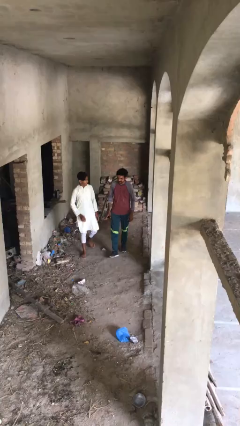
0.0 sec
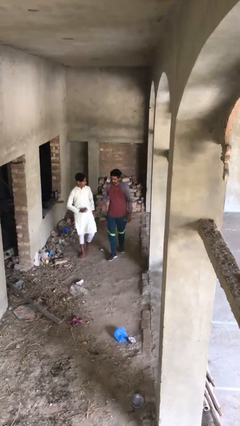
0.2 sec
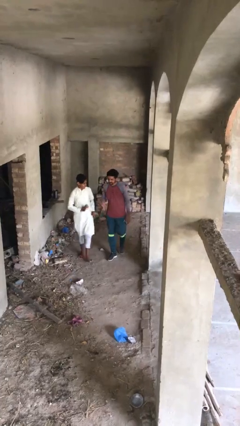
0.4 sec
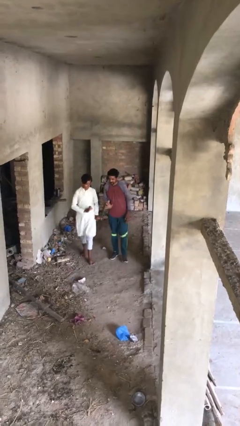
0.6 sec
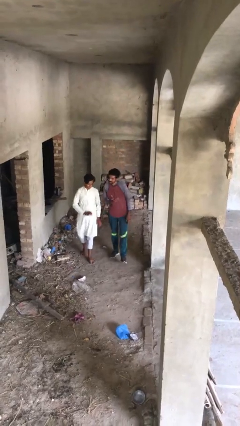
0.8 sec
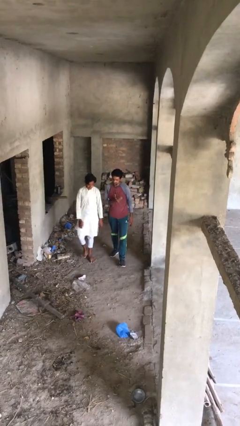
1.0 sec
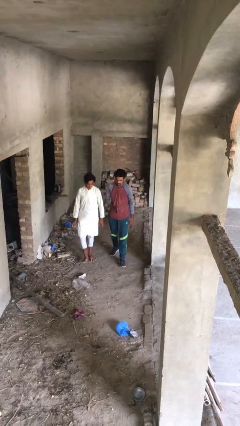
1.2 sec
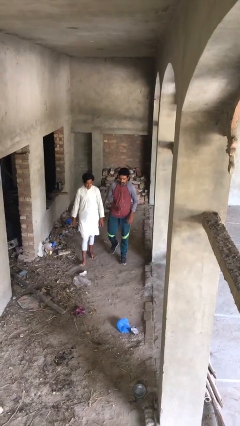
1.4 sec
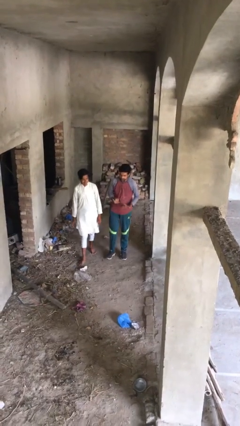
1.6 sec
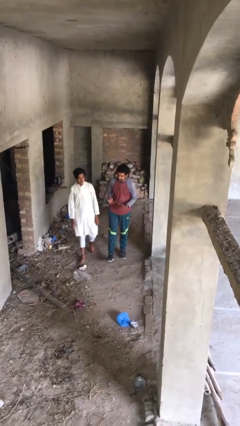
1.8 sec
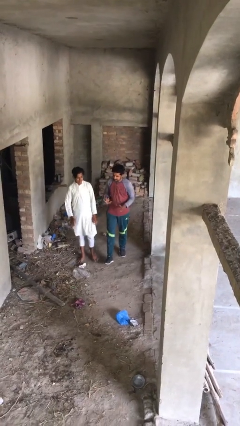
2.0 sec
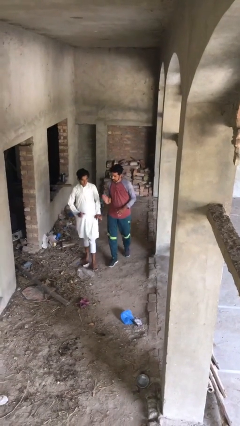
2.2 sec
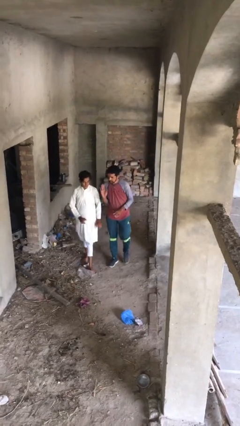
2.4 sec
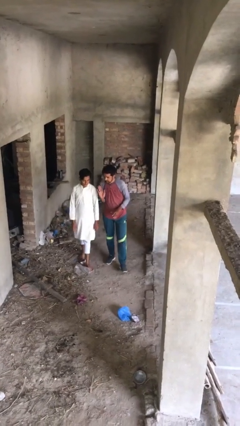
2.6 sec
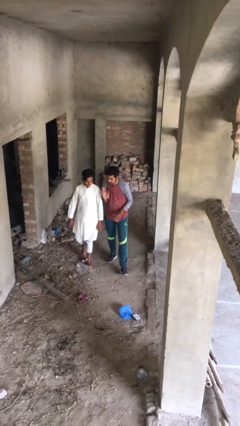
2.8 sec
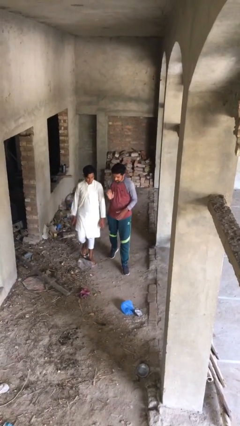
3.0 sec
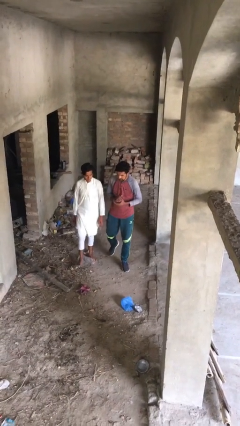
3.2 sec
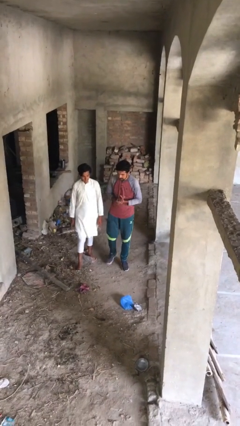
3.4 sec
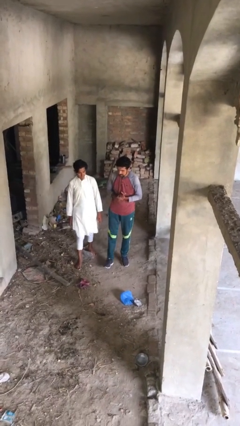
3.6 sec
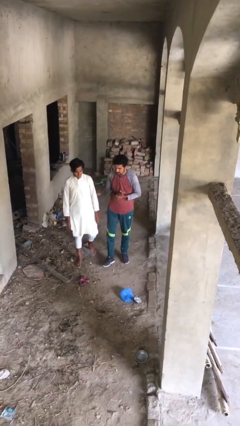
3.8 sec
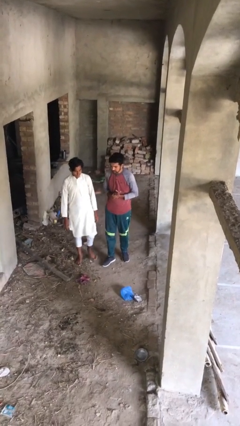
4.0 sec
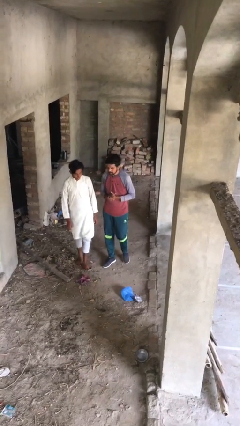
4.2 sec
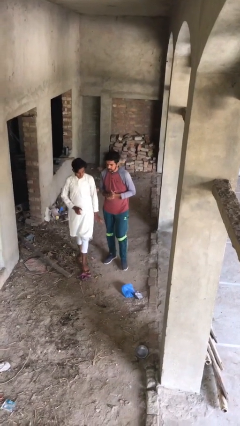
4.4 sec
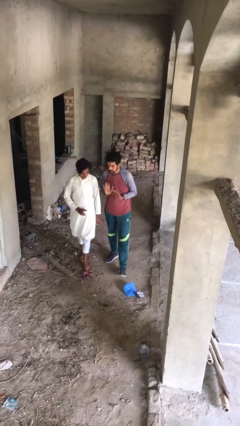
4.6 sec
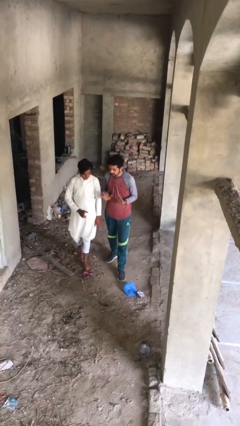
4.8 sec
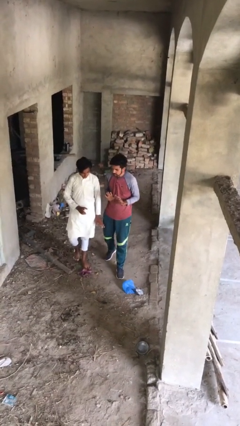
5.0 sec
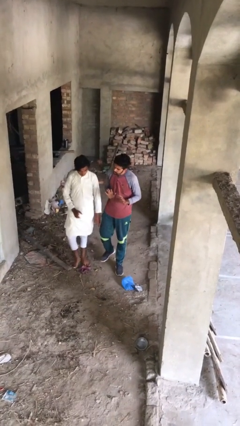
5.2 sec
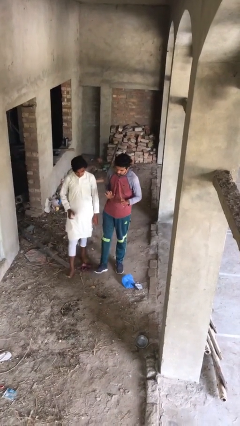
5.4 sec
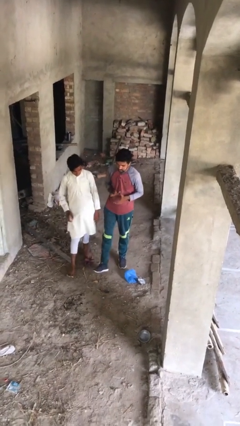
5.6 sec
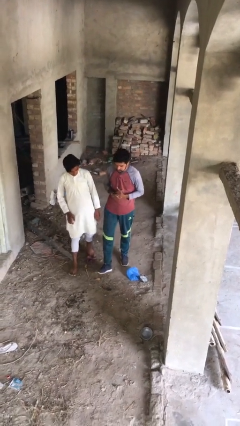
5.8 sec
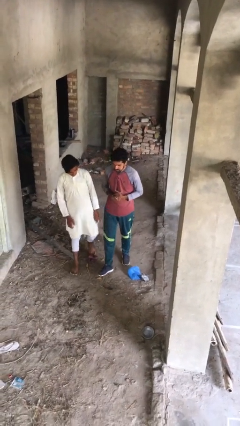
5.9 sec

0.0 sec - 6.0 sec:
person talks to person

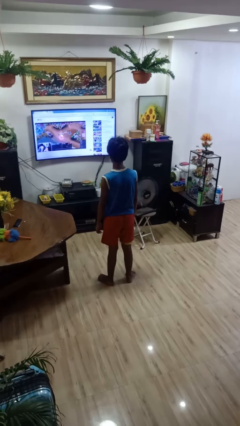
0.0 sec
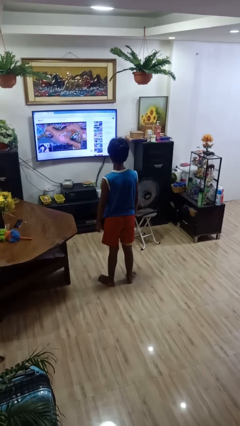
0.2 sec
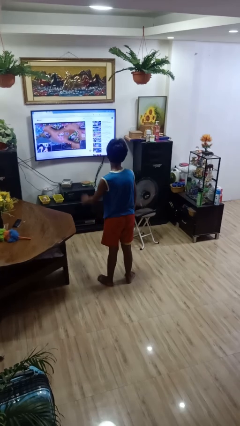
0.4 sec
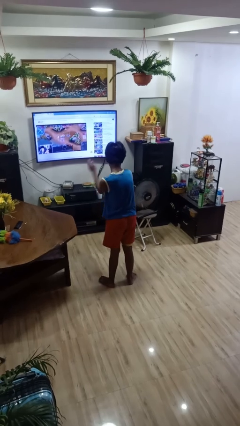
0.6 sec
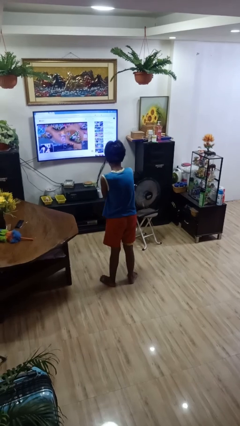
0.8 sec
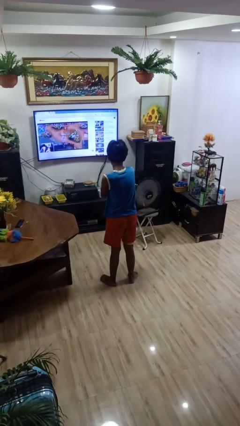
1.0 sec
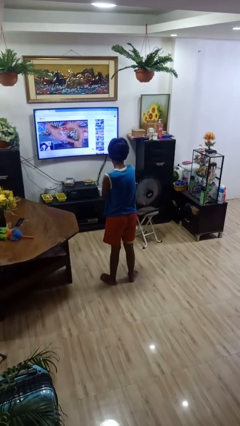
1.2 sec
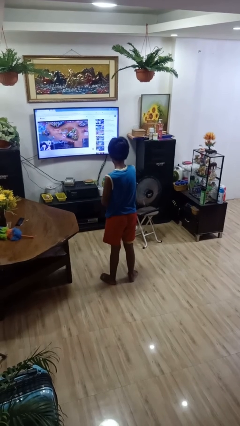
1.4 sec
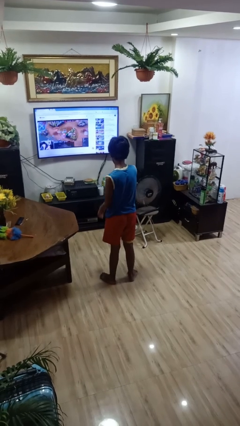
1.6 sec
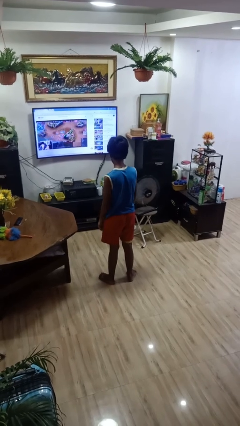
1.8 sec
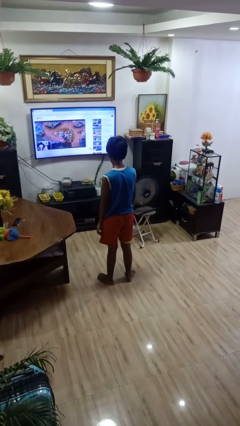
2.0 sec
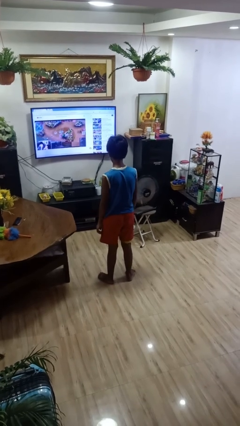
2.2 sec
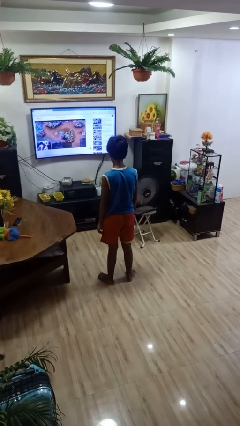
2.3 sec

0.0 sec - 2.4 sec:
person swats bug

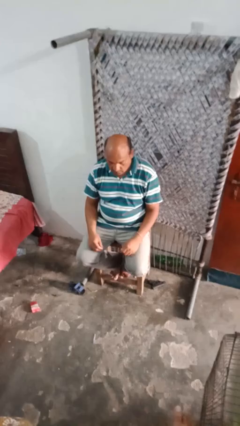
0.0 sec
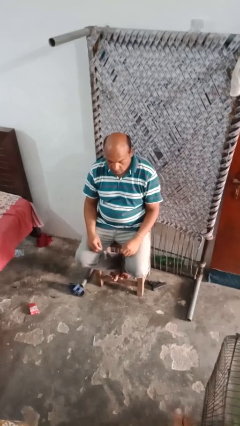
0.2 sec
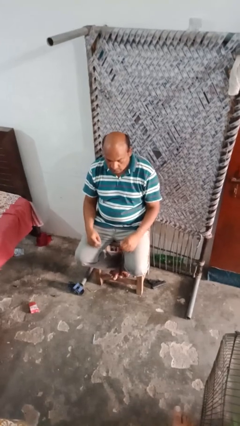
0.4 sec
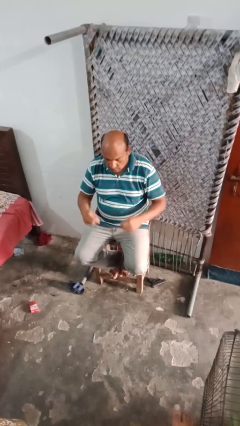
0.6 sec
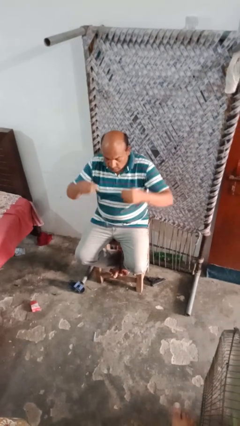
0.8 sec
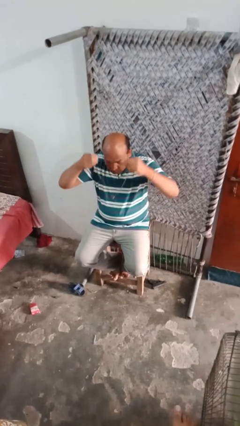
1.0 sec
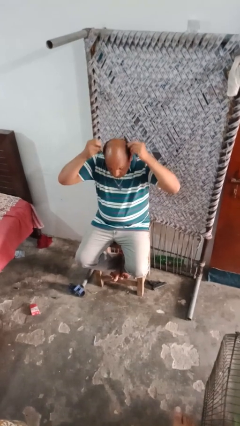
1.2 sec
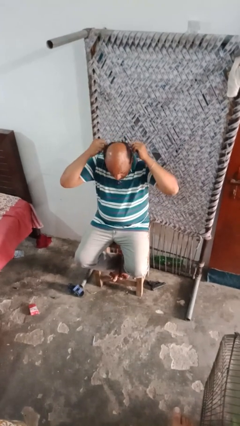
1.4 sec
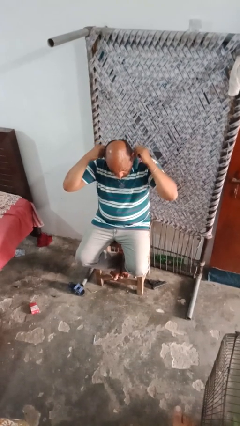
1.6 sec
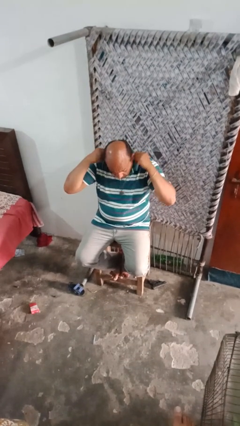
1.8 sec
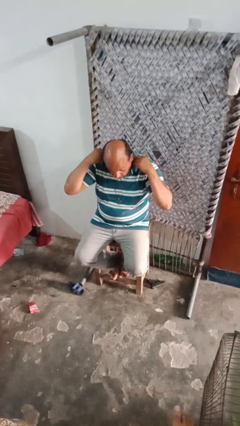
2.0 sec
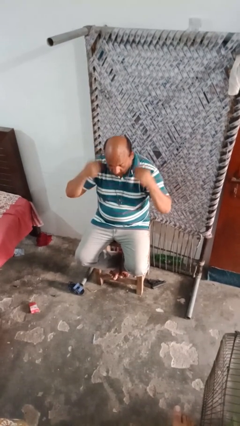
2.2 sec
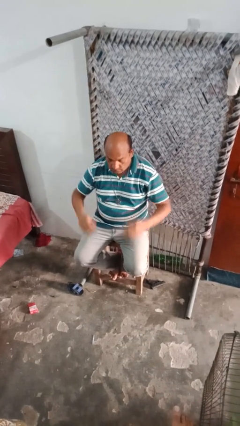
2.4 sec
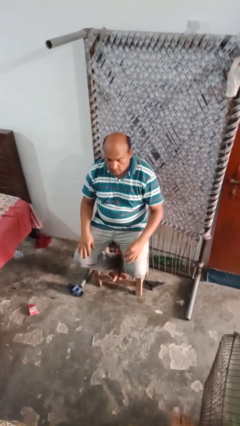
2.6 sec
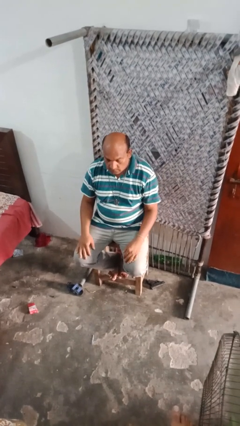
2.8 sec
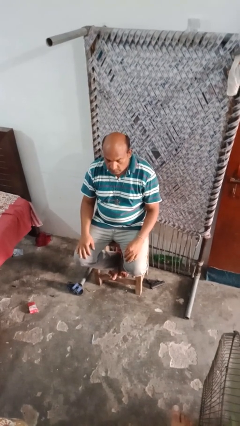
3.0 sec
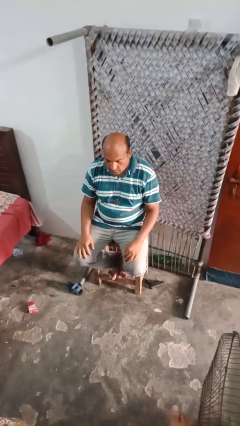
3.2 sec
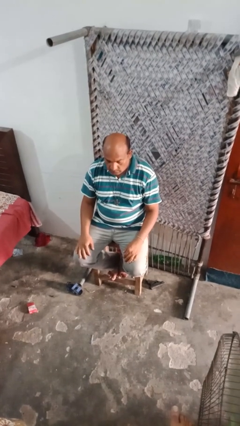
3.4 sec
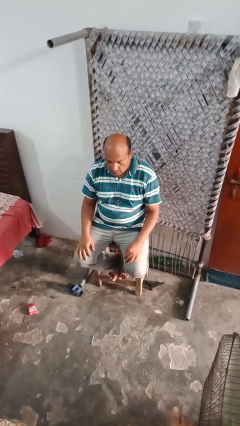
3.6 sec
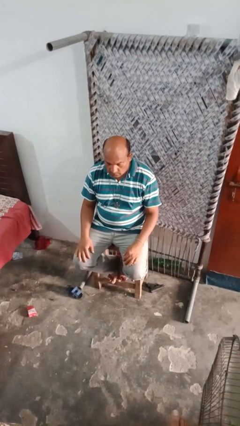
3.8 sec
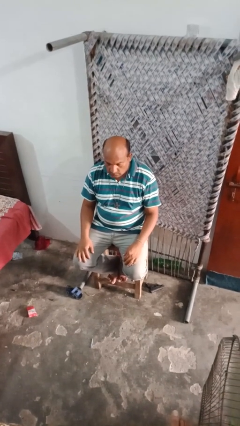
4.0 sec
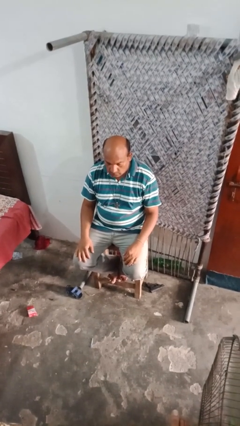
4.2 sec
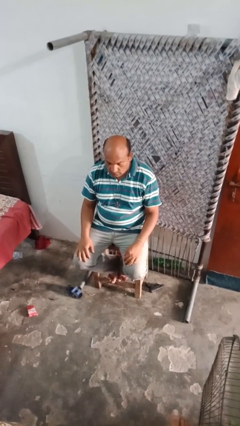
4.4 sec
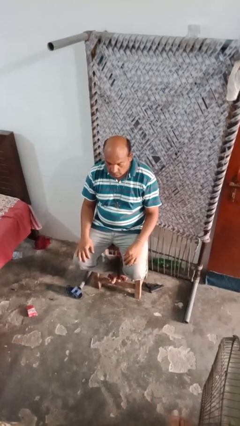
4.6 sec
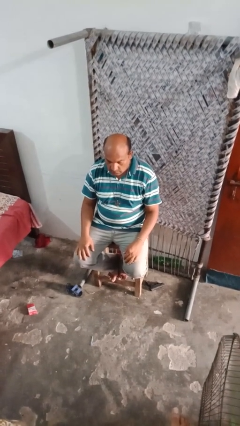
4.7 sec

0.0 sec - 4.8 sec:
person puts on necklace

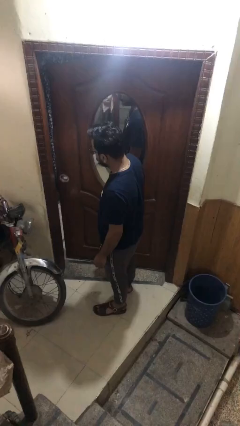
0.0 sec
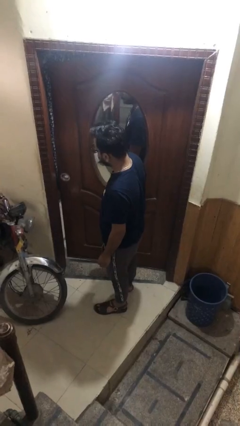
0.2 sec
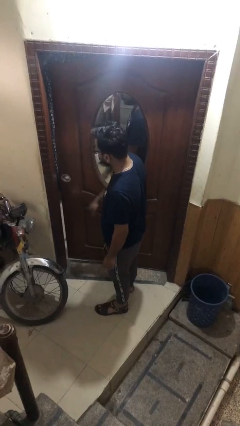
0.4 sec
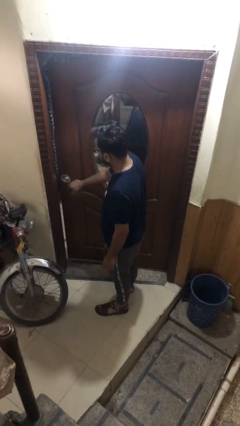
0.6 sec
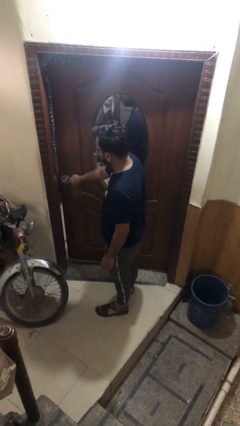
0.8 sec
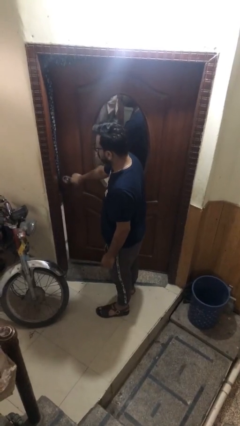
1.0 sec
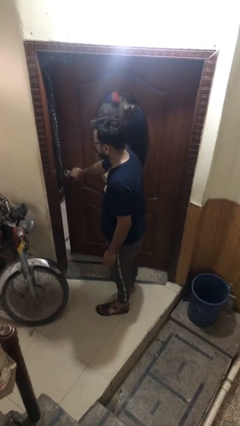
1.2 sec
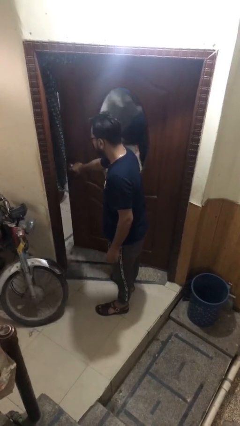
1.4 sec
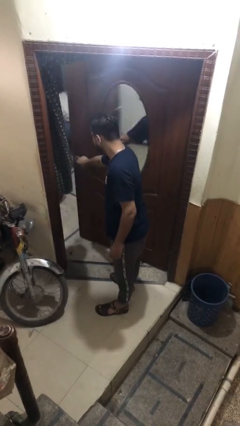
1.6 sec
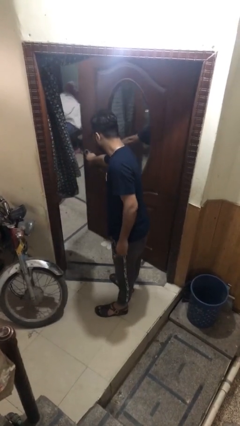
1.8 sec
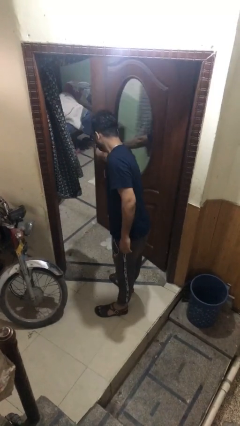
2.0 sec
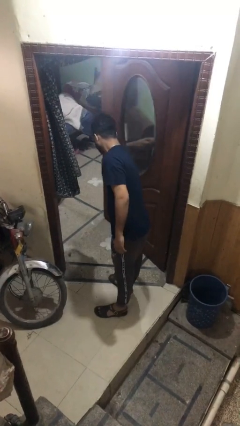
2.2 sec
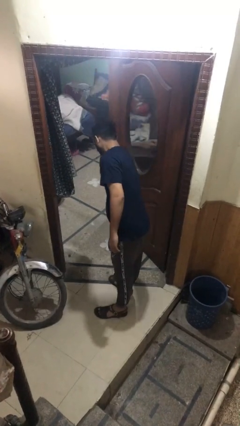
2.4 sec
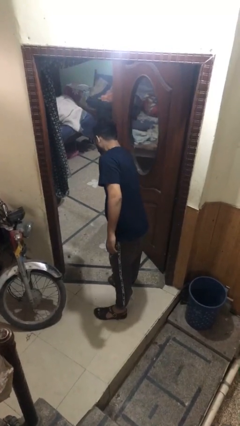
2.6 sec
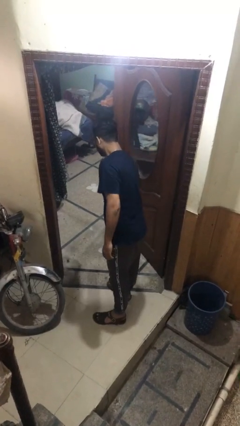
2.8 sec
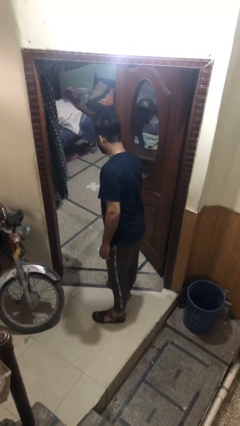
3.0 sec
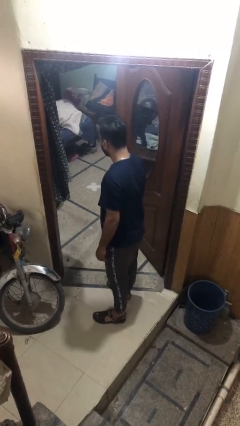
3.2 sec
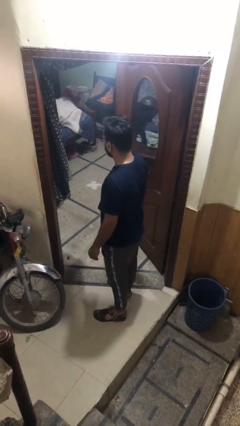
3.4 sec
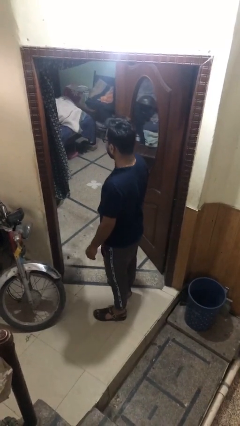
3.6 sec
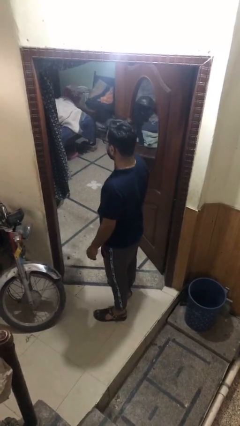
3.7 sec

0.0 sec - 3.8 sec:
person opens facility door

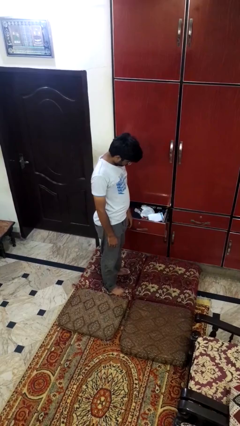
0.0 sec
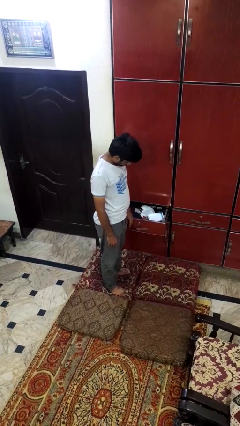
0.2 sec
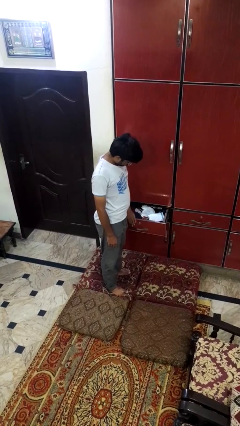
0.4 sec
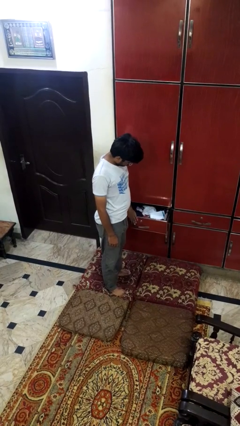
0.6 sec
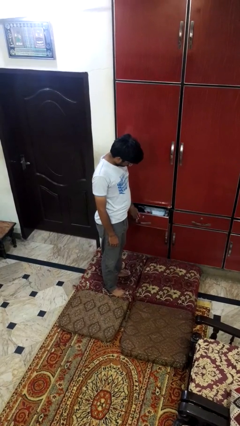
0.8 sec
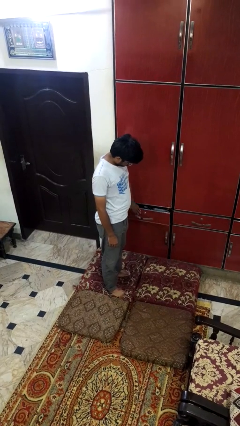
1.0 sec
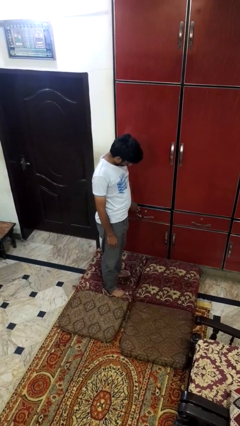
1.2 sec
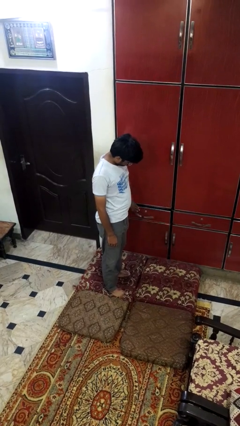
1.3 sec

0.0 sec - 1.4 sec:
person closes dresser drawer
